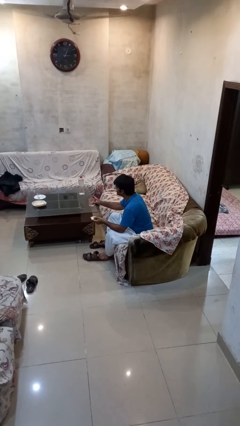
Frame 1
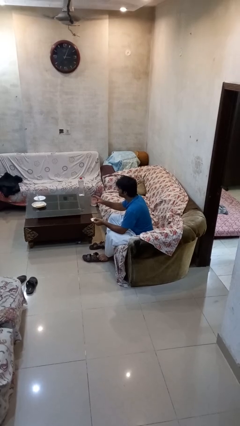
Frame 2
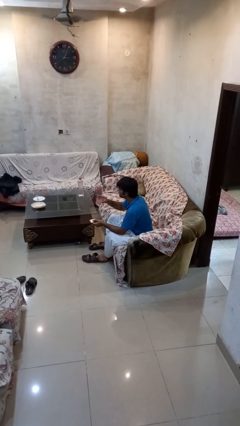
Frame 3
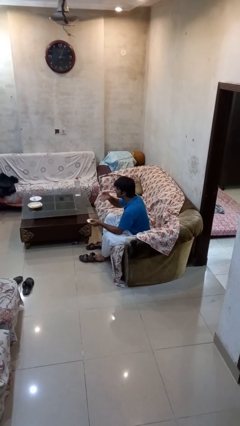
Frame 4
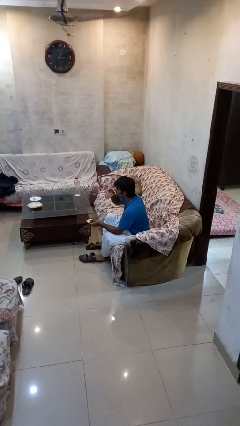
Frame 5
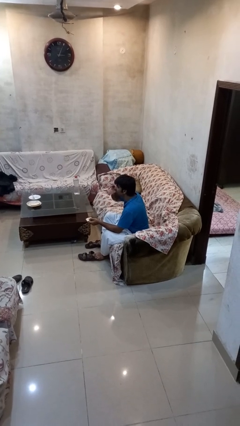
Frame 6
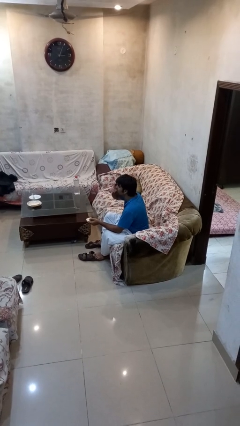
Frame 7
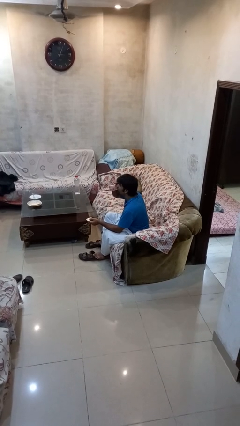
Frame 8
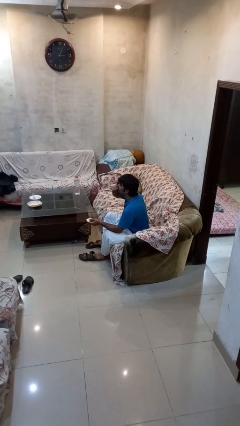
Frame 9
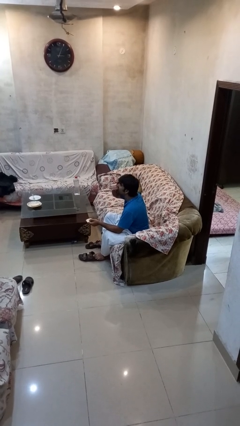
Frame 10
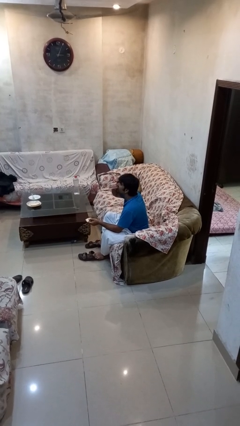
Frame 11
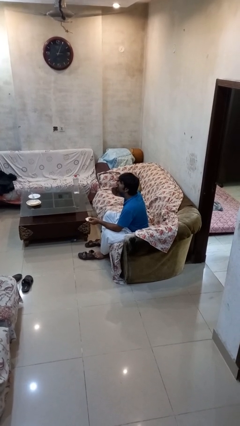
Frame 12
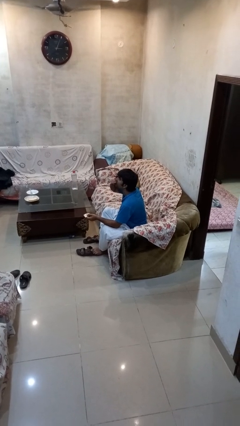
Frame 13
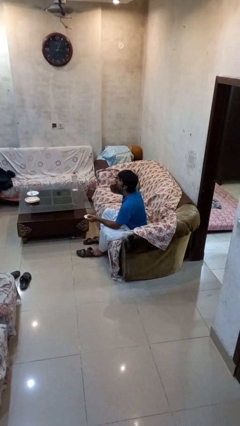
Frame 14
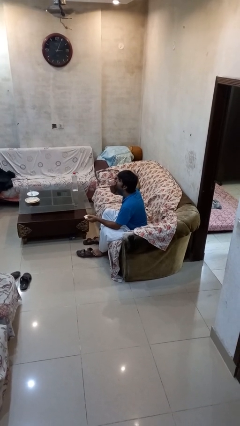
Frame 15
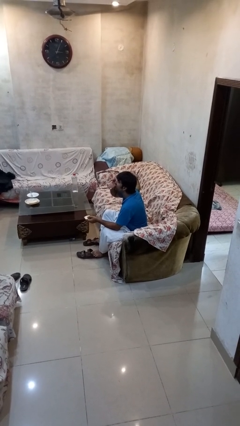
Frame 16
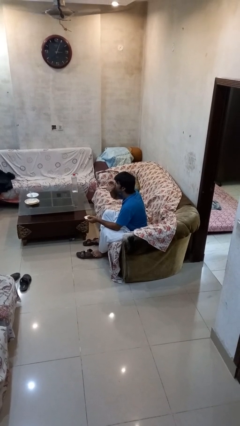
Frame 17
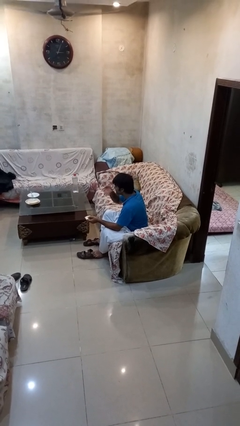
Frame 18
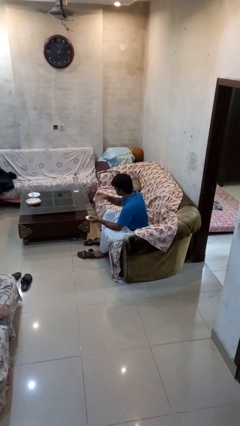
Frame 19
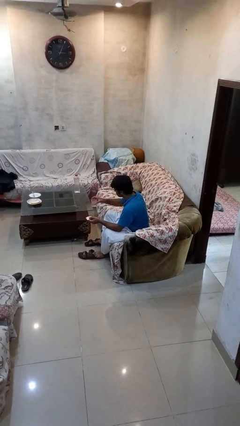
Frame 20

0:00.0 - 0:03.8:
person drinks from cup

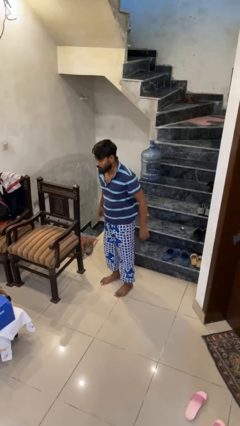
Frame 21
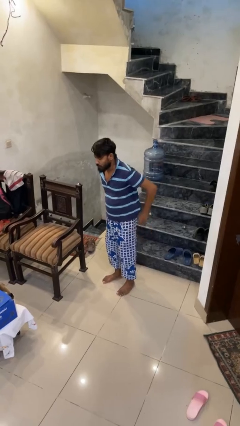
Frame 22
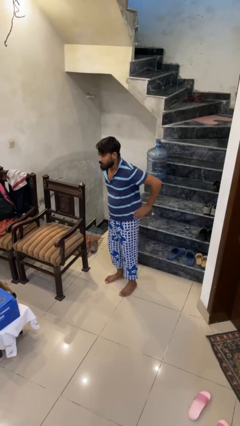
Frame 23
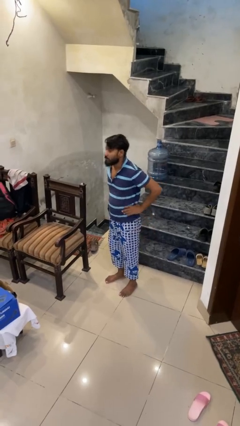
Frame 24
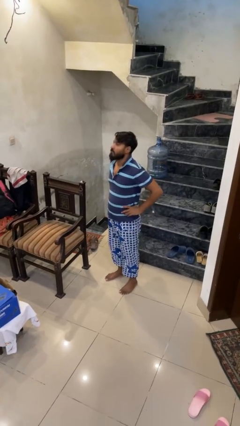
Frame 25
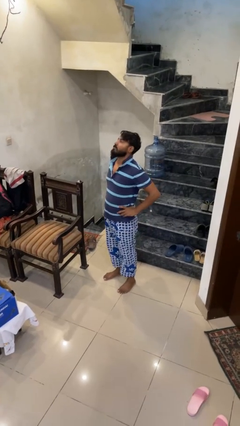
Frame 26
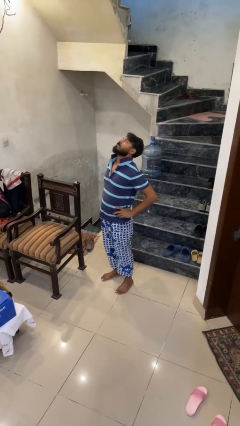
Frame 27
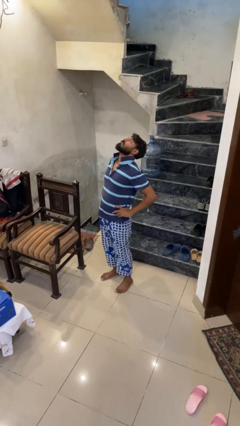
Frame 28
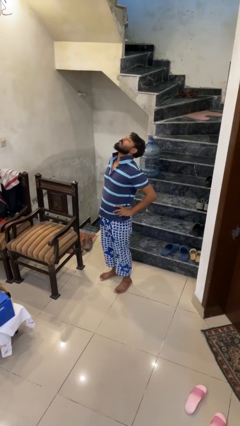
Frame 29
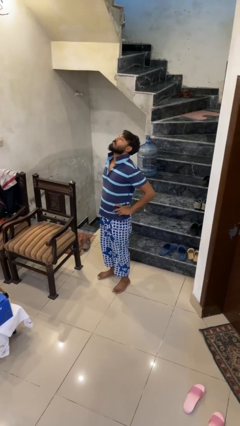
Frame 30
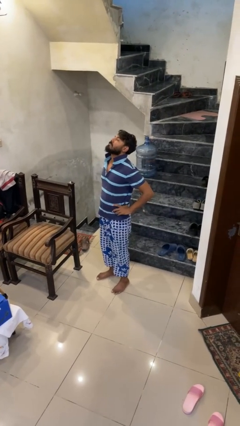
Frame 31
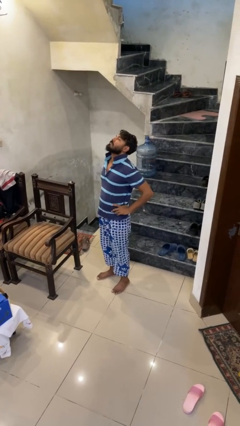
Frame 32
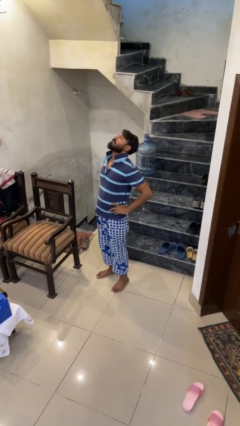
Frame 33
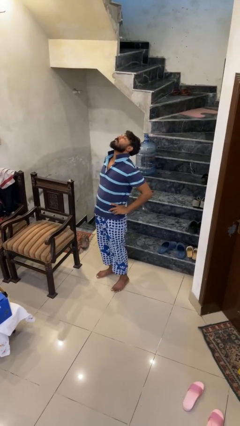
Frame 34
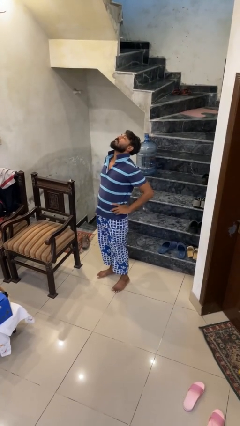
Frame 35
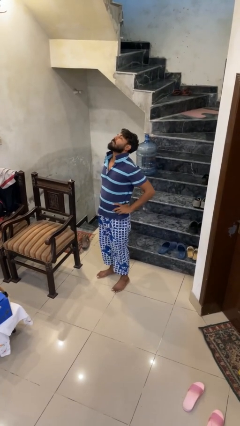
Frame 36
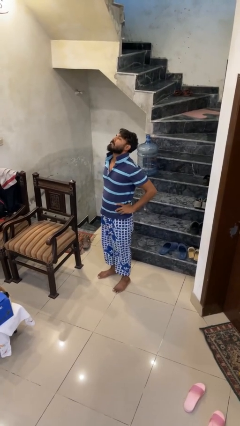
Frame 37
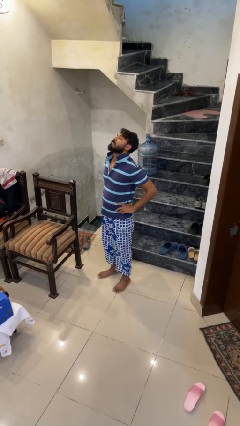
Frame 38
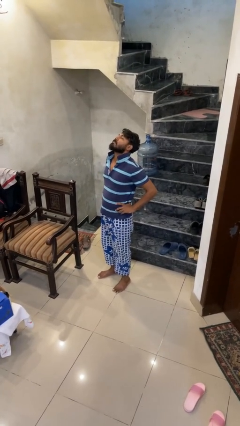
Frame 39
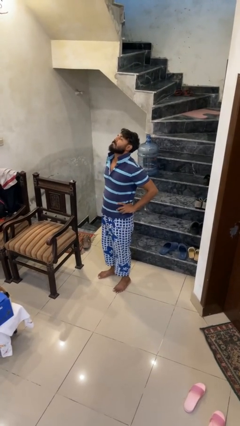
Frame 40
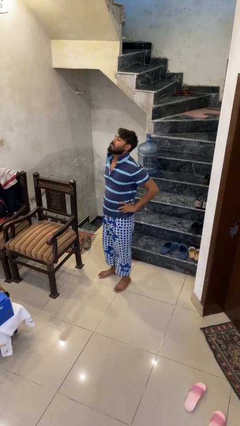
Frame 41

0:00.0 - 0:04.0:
person stretches back

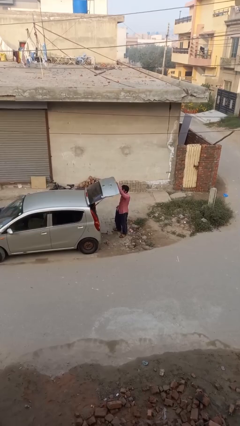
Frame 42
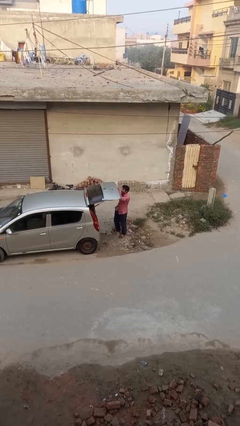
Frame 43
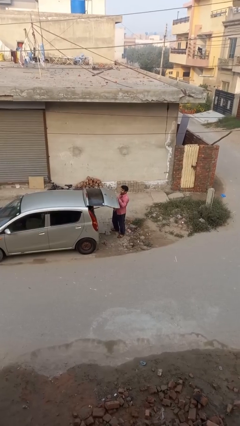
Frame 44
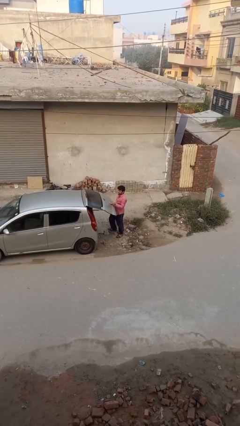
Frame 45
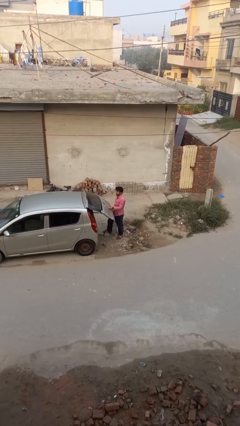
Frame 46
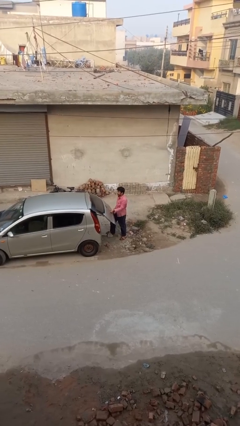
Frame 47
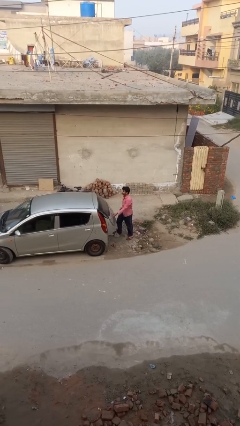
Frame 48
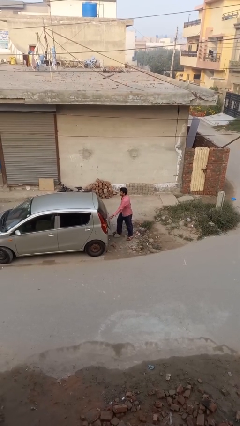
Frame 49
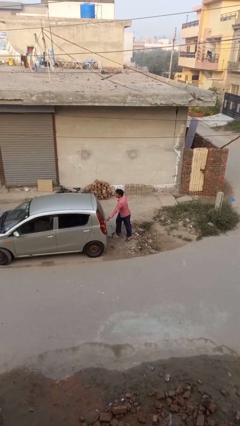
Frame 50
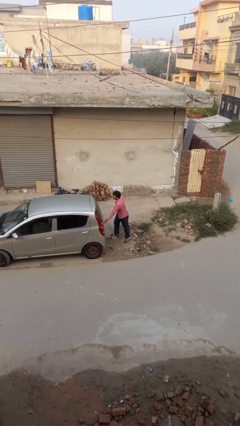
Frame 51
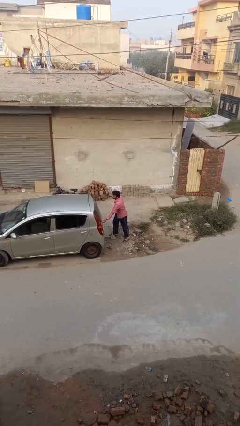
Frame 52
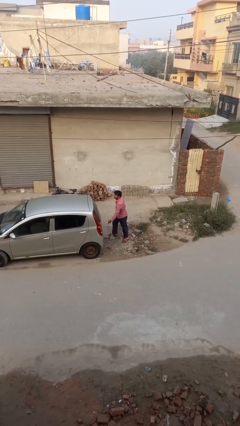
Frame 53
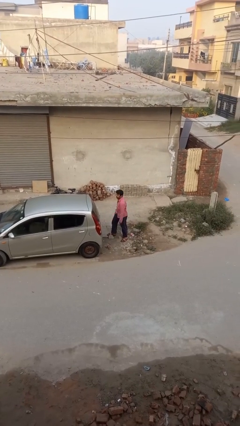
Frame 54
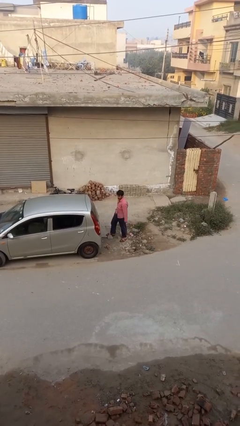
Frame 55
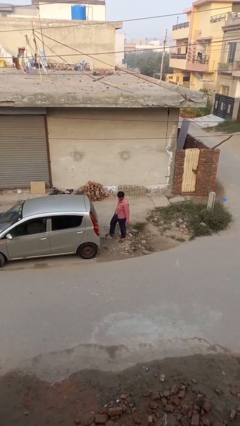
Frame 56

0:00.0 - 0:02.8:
person closes car trunk

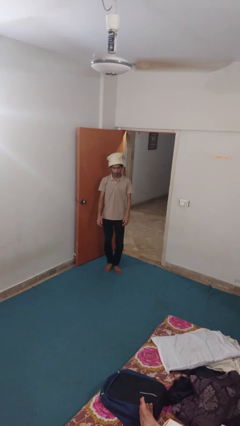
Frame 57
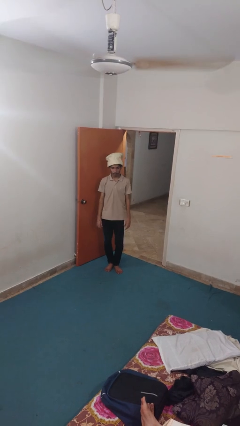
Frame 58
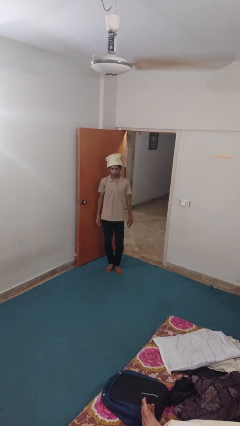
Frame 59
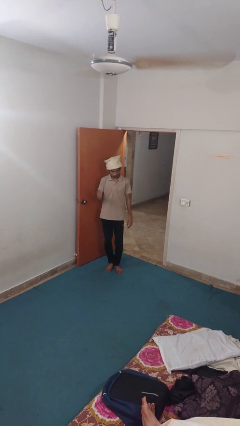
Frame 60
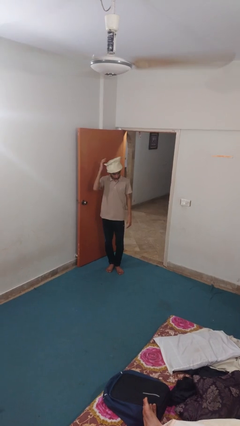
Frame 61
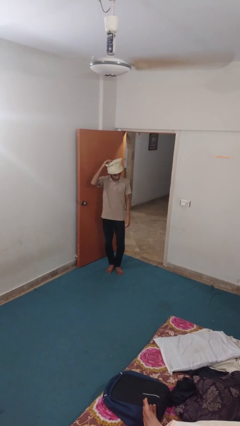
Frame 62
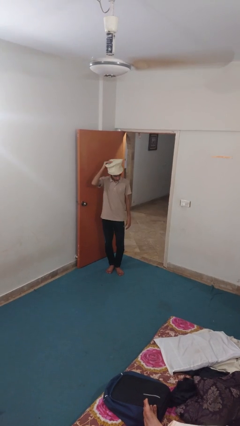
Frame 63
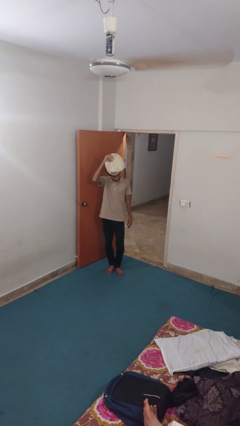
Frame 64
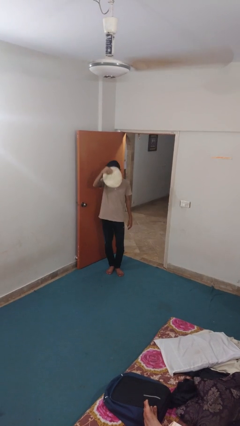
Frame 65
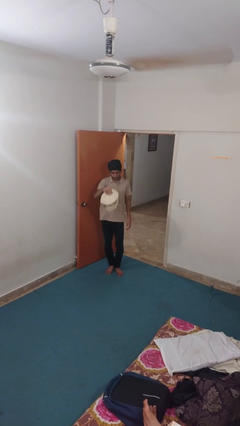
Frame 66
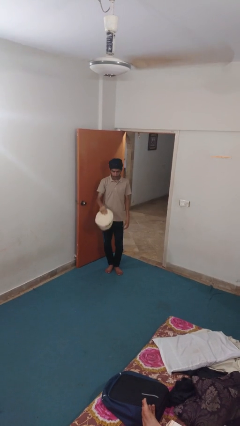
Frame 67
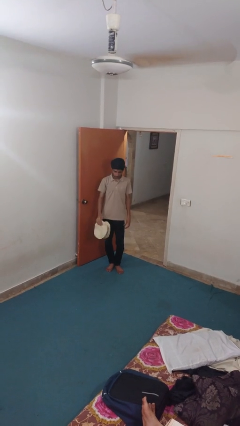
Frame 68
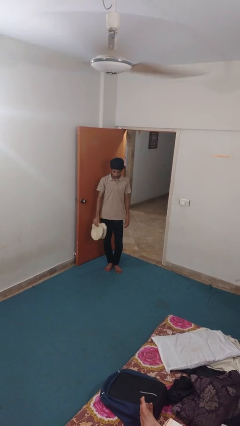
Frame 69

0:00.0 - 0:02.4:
person takes off hat

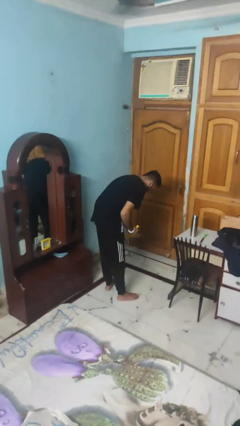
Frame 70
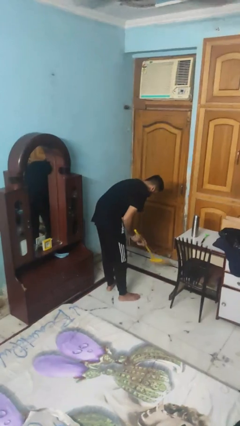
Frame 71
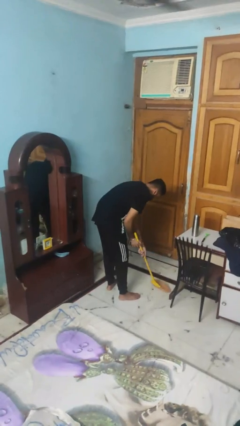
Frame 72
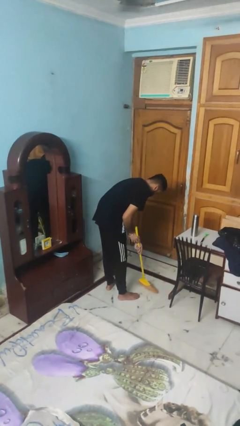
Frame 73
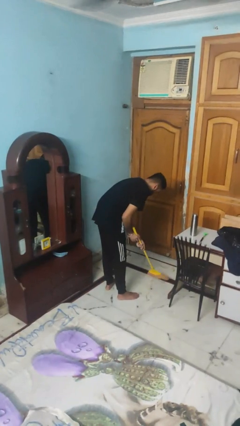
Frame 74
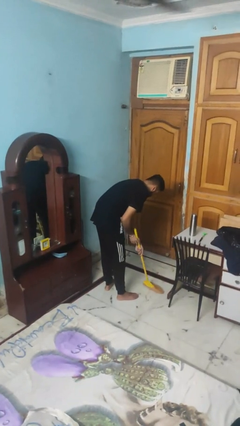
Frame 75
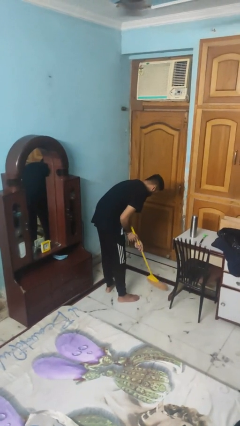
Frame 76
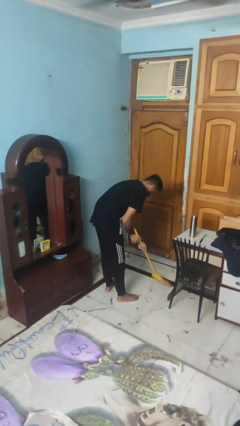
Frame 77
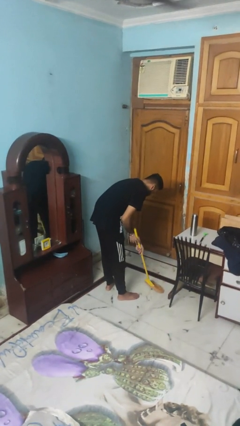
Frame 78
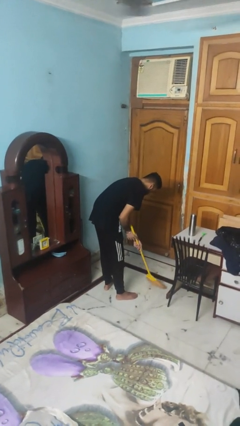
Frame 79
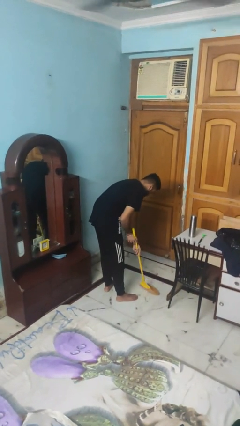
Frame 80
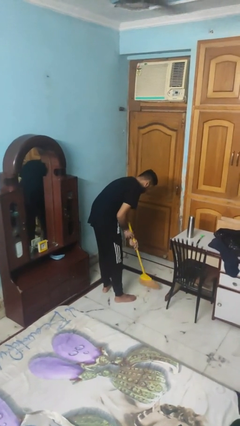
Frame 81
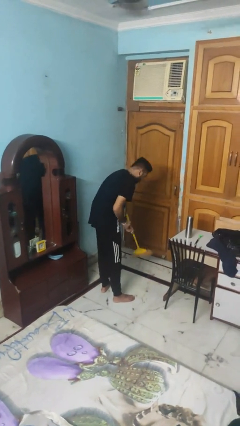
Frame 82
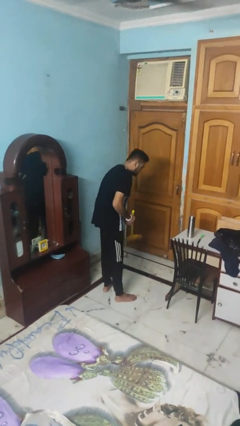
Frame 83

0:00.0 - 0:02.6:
person sweeps floor

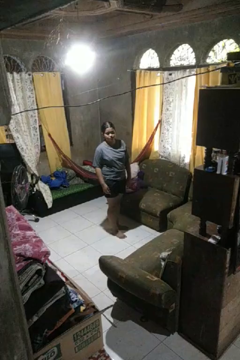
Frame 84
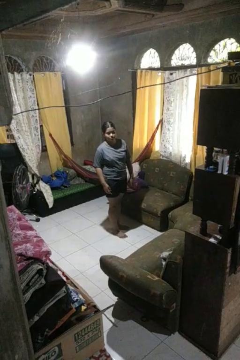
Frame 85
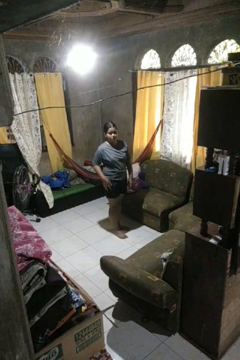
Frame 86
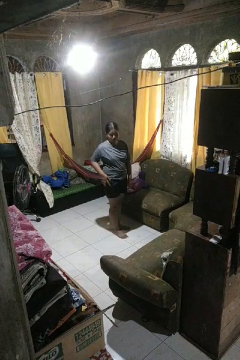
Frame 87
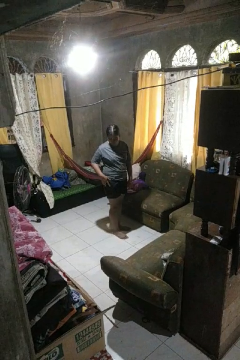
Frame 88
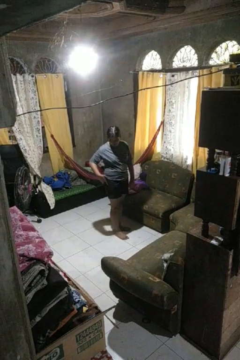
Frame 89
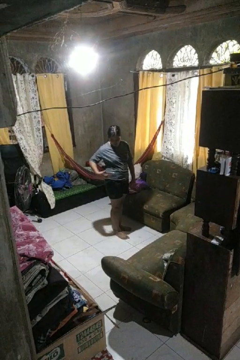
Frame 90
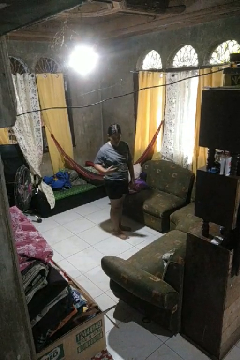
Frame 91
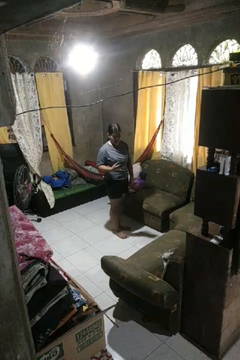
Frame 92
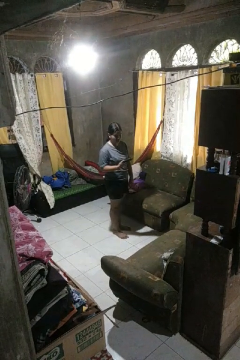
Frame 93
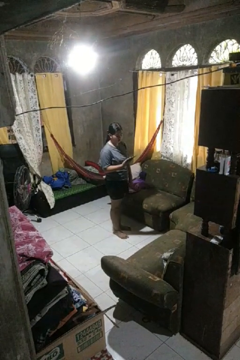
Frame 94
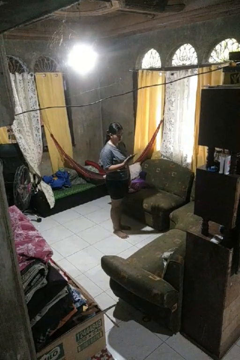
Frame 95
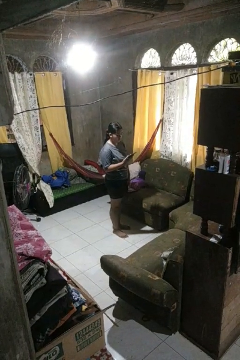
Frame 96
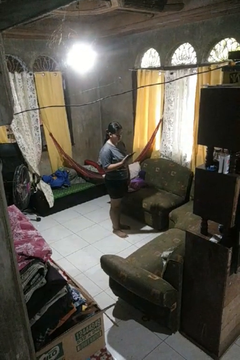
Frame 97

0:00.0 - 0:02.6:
person takes phone from pocket
